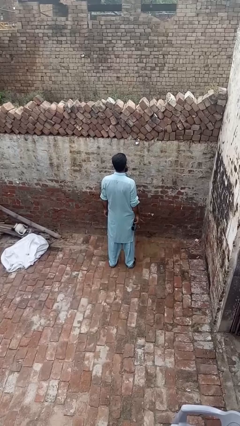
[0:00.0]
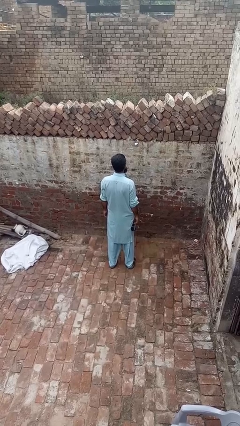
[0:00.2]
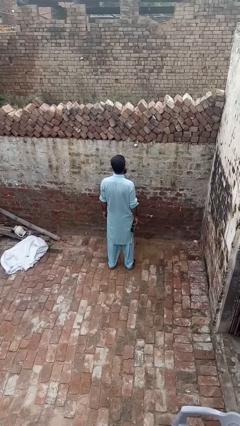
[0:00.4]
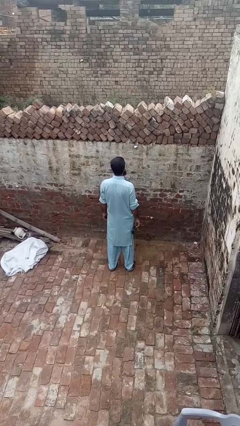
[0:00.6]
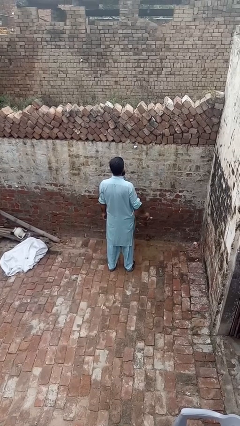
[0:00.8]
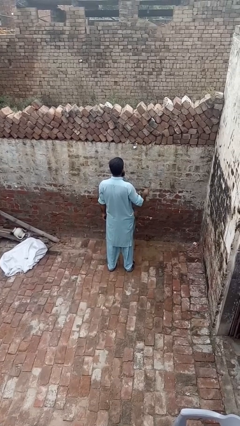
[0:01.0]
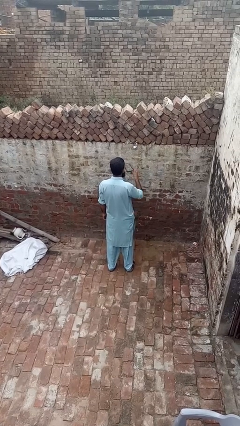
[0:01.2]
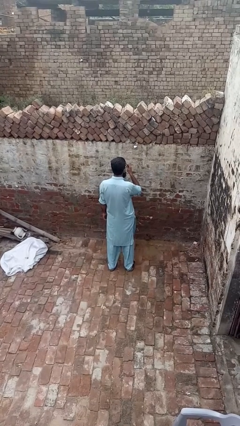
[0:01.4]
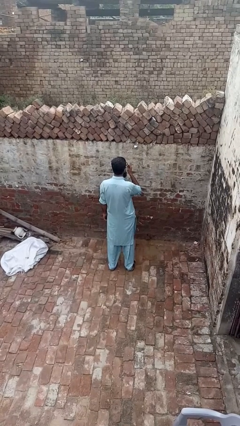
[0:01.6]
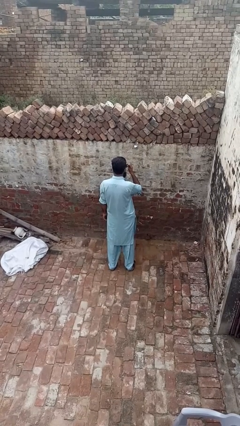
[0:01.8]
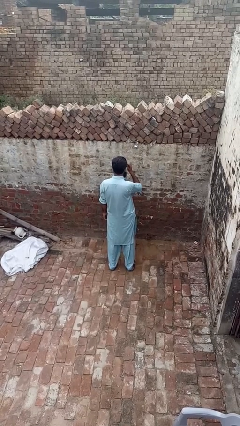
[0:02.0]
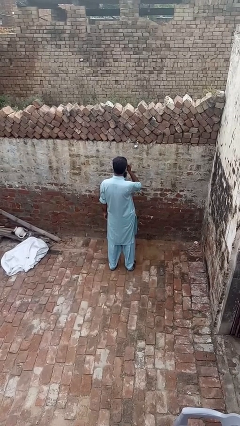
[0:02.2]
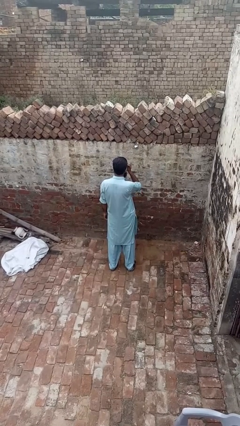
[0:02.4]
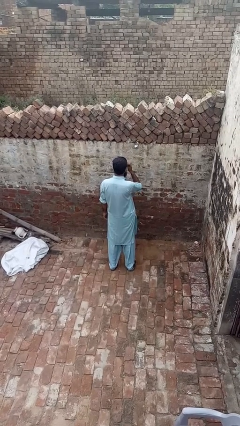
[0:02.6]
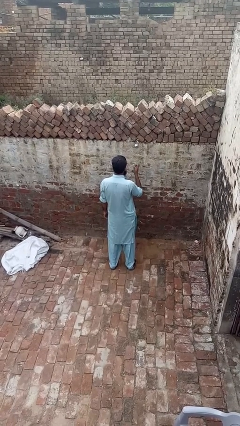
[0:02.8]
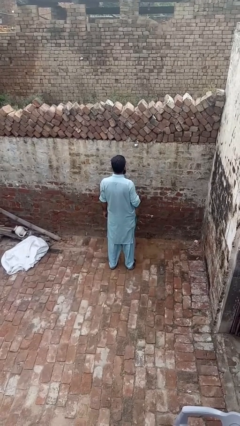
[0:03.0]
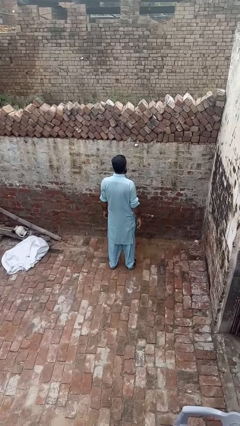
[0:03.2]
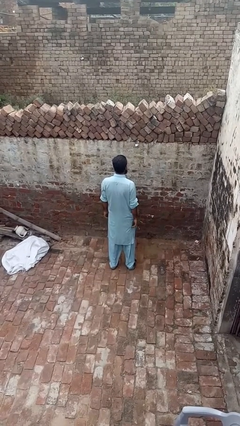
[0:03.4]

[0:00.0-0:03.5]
person puts on sunglasses

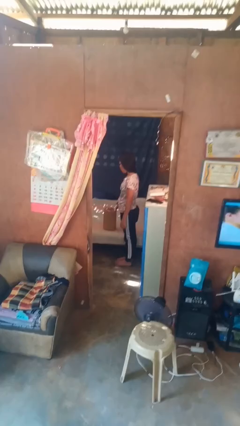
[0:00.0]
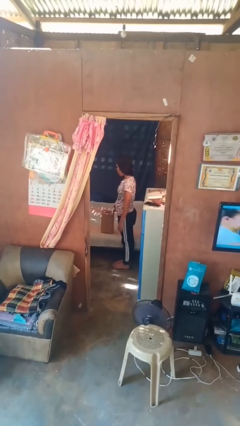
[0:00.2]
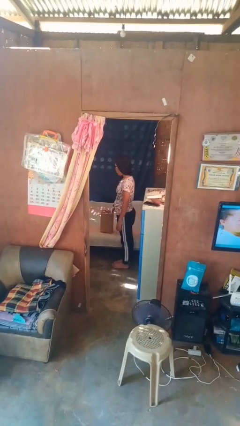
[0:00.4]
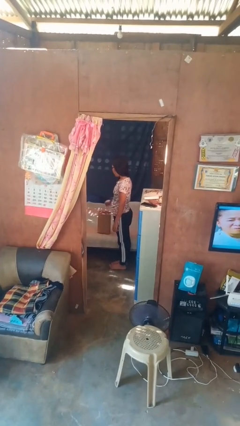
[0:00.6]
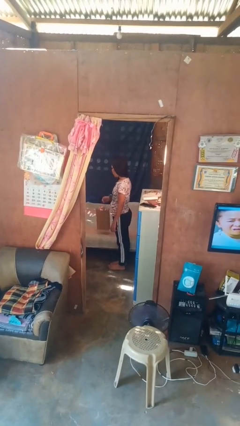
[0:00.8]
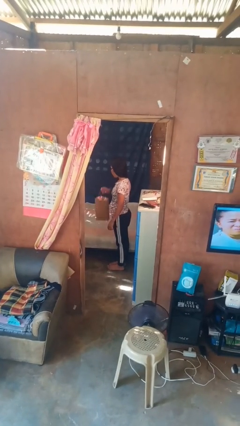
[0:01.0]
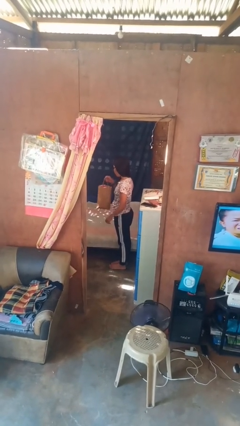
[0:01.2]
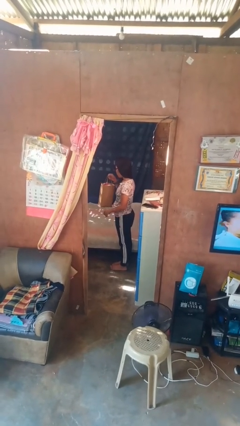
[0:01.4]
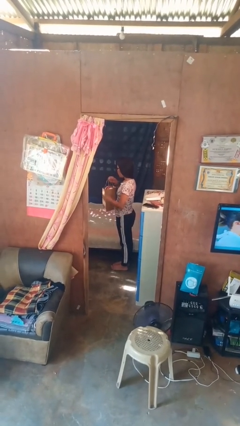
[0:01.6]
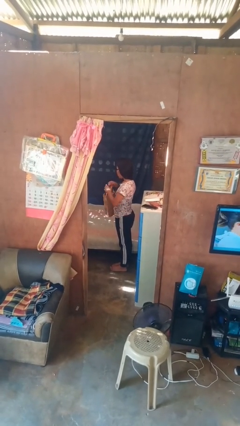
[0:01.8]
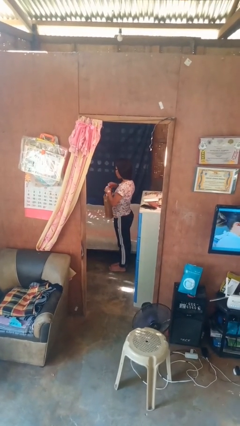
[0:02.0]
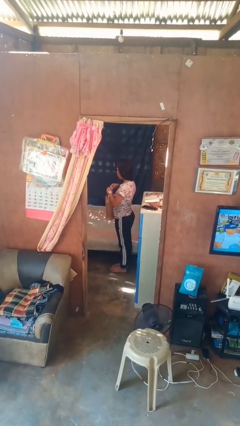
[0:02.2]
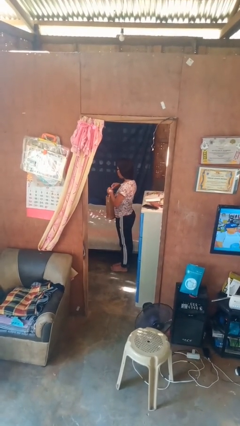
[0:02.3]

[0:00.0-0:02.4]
person picks up object from bed

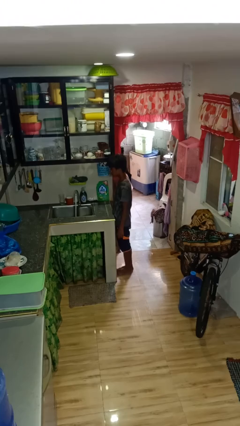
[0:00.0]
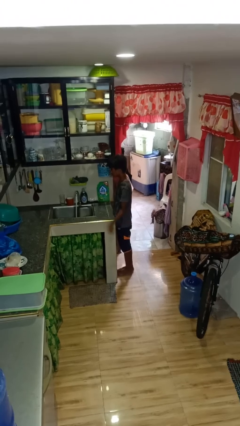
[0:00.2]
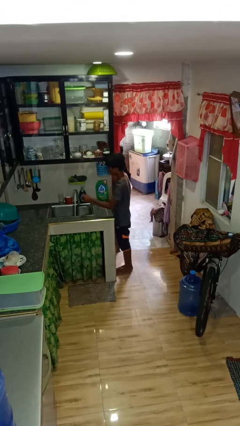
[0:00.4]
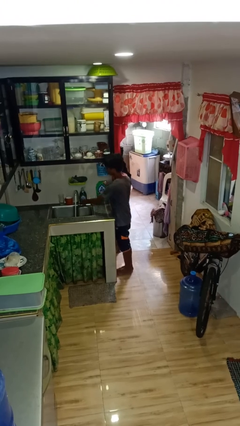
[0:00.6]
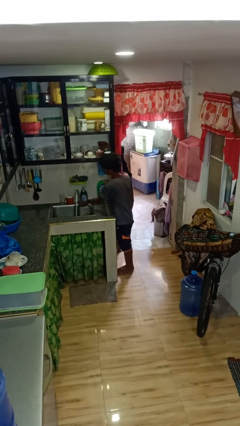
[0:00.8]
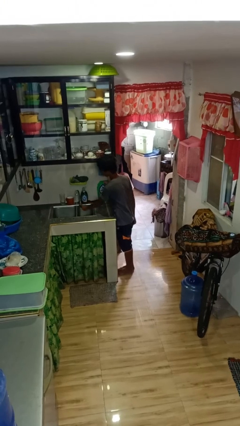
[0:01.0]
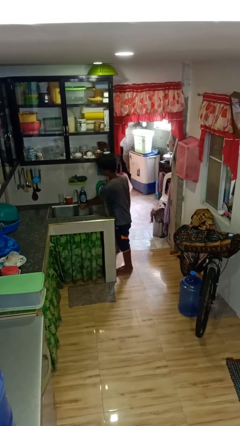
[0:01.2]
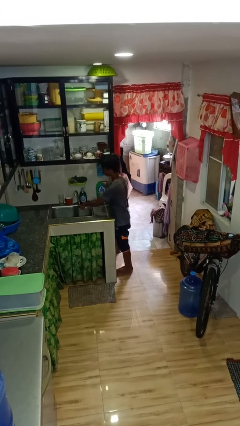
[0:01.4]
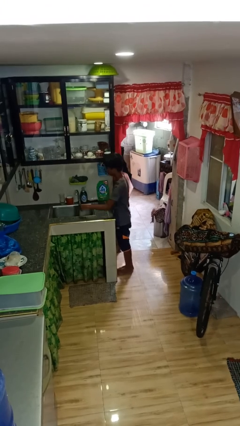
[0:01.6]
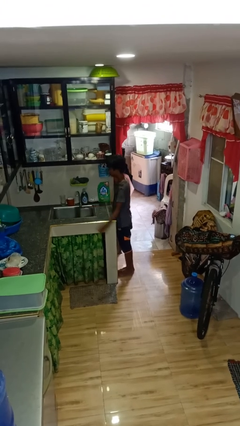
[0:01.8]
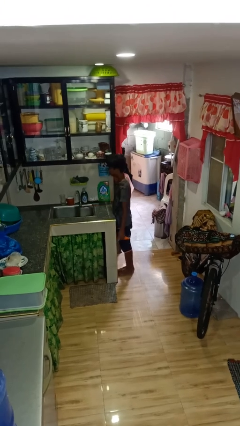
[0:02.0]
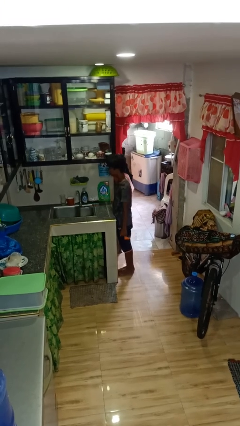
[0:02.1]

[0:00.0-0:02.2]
person turns off faucet

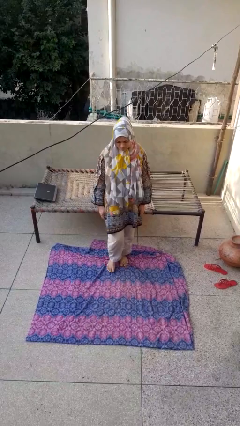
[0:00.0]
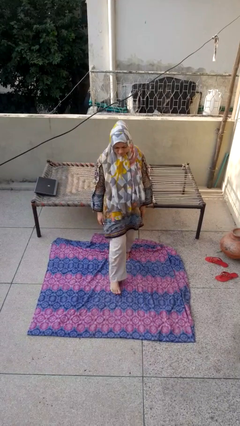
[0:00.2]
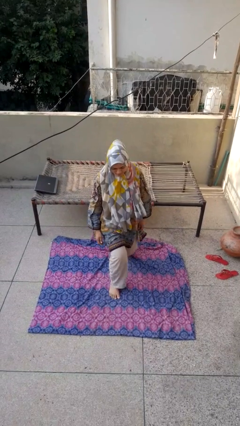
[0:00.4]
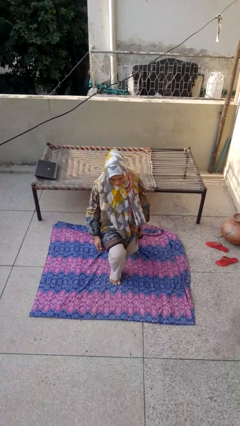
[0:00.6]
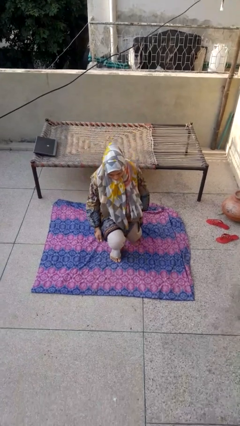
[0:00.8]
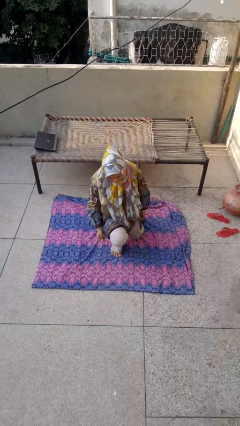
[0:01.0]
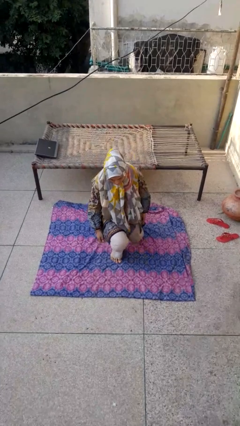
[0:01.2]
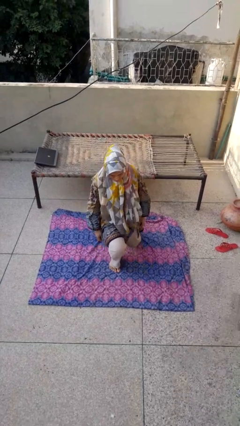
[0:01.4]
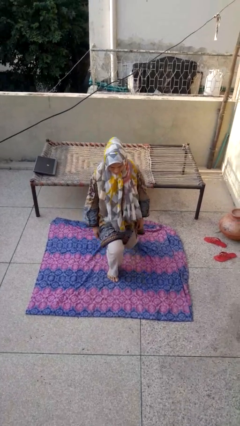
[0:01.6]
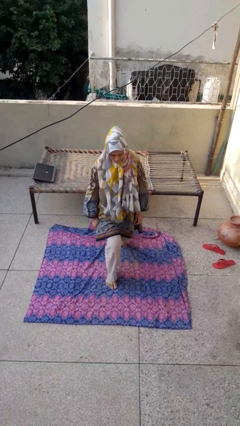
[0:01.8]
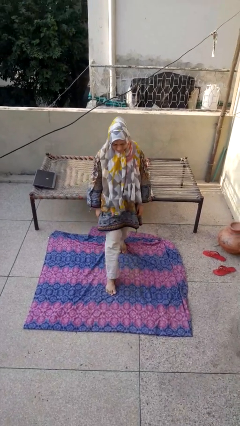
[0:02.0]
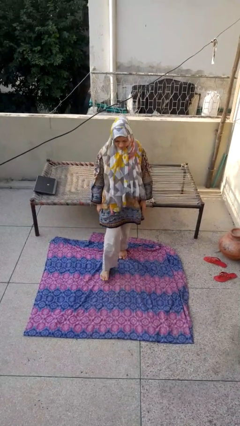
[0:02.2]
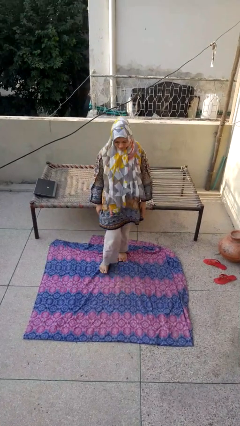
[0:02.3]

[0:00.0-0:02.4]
person exercises with lunges

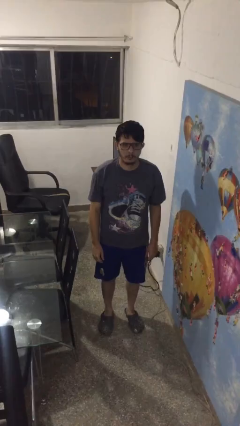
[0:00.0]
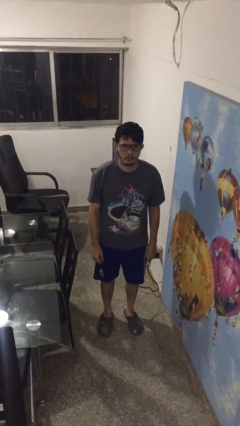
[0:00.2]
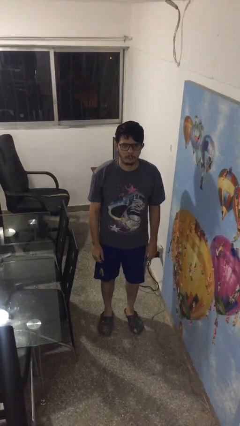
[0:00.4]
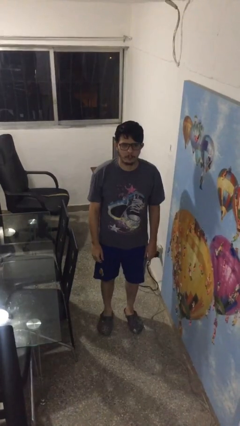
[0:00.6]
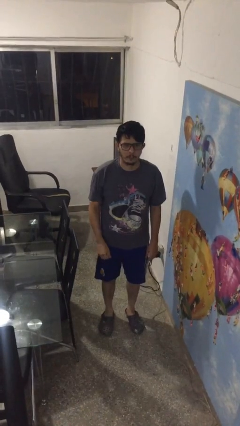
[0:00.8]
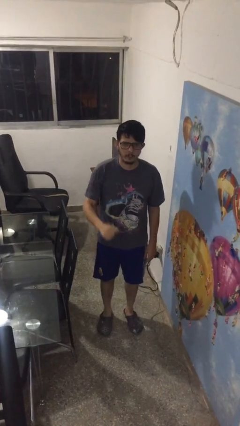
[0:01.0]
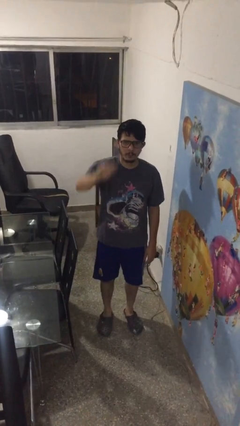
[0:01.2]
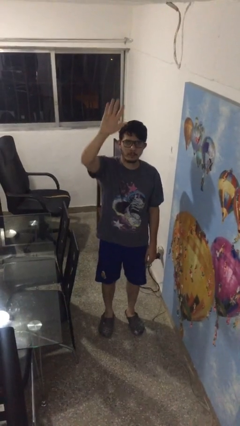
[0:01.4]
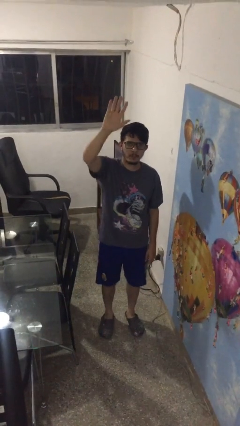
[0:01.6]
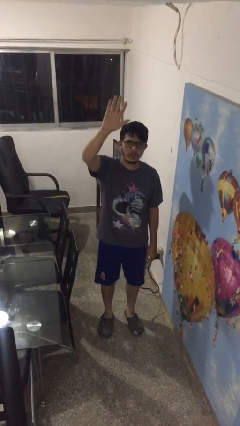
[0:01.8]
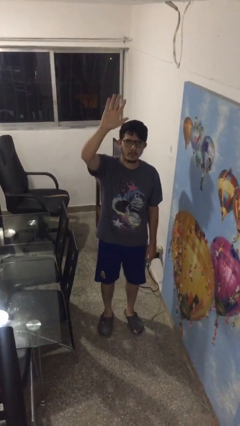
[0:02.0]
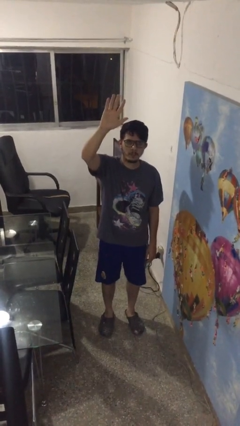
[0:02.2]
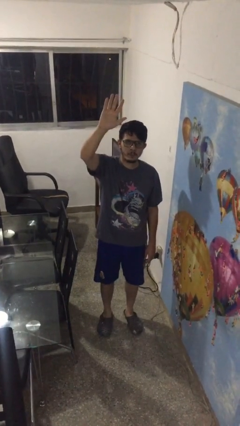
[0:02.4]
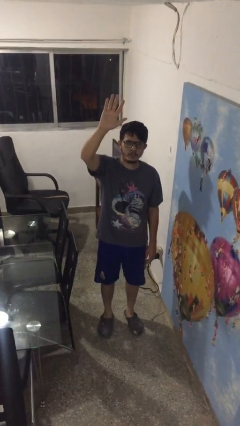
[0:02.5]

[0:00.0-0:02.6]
person gestures raise hand

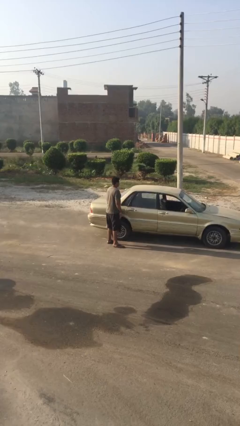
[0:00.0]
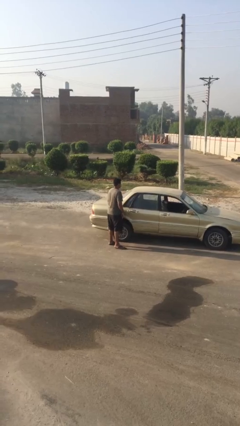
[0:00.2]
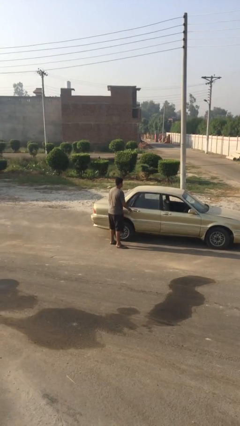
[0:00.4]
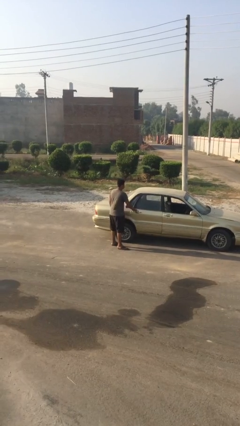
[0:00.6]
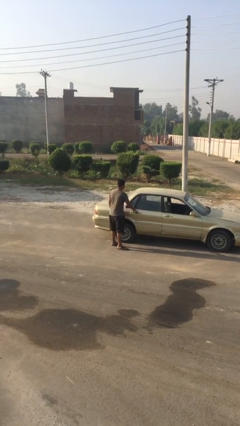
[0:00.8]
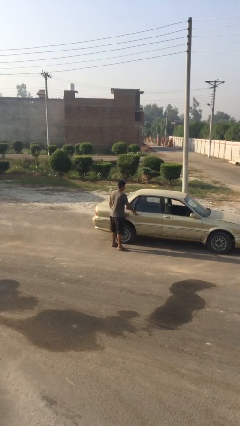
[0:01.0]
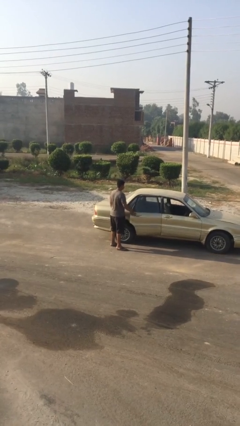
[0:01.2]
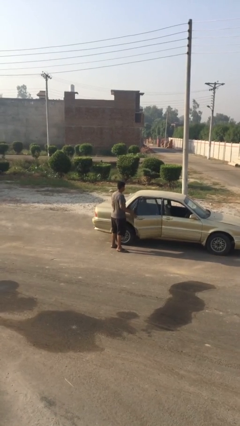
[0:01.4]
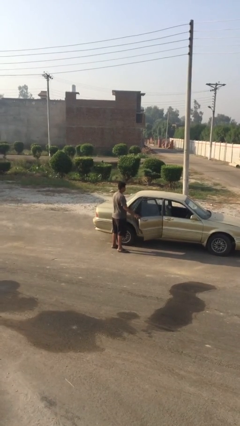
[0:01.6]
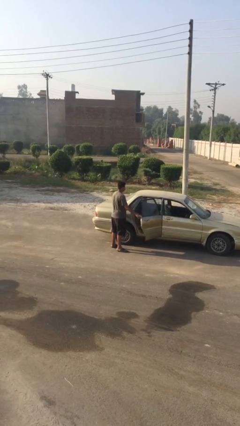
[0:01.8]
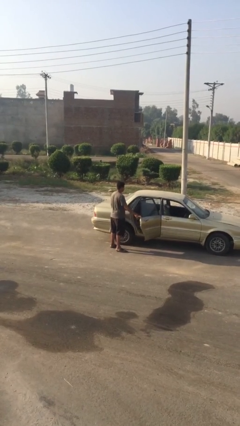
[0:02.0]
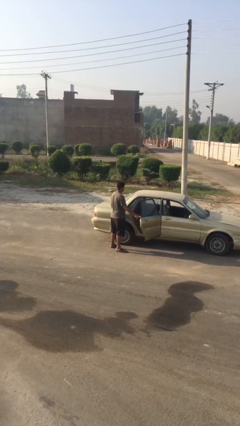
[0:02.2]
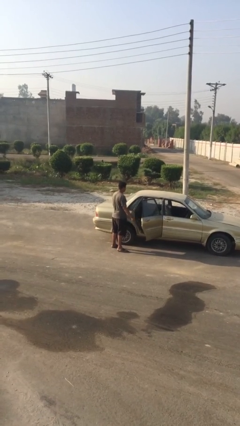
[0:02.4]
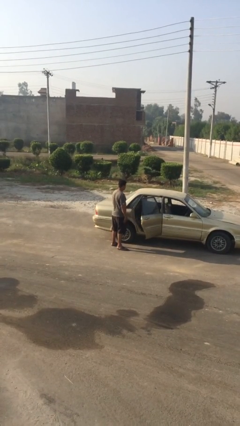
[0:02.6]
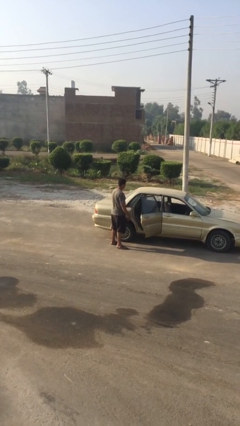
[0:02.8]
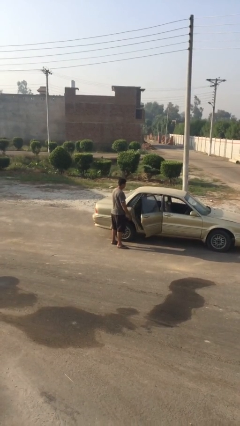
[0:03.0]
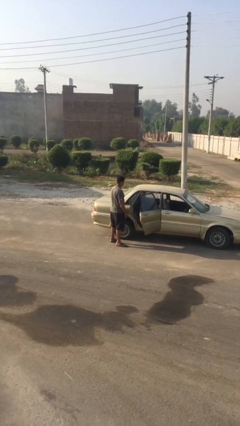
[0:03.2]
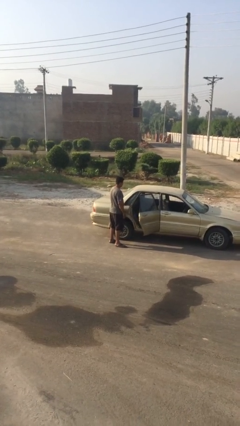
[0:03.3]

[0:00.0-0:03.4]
person opens car door

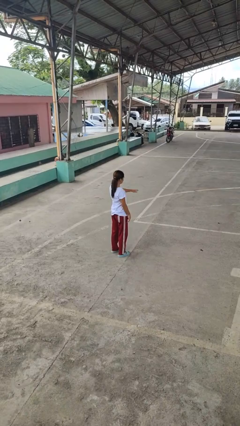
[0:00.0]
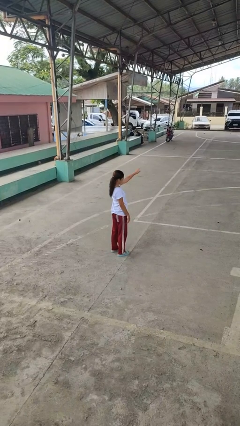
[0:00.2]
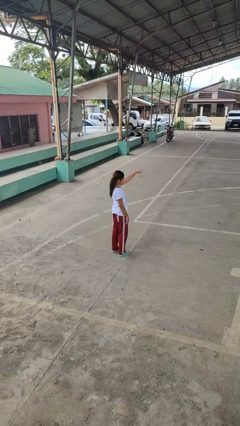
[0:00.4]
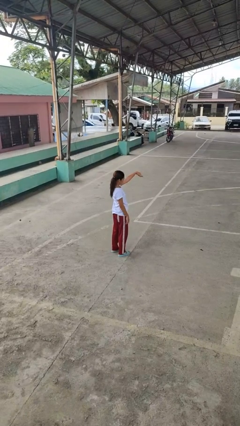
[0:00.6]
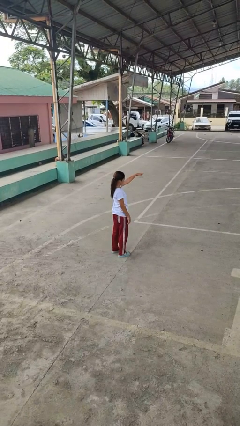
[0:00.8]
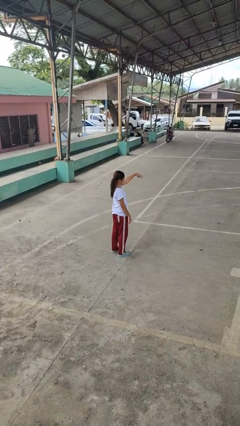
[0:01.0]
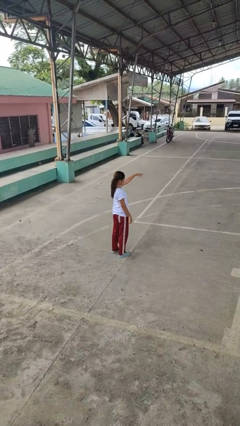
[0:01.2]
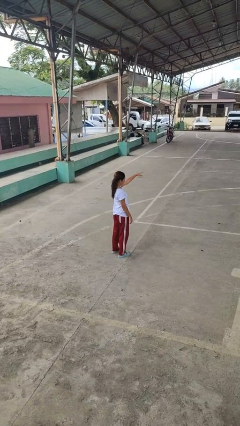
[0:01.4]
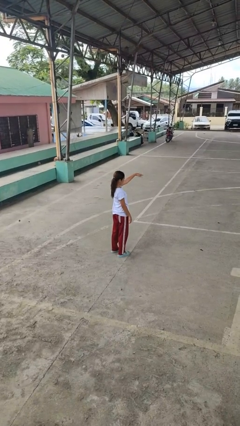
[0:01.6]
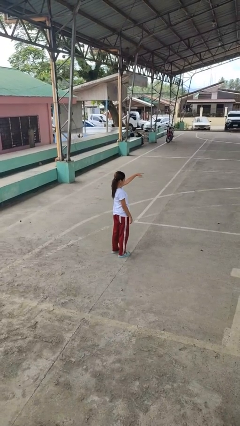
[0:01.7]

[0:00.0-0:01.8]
person gestures come here
